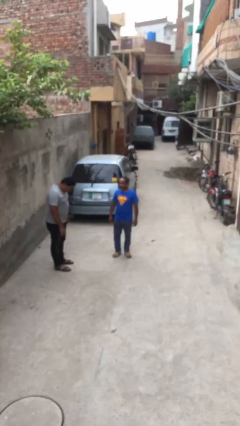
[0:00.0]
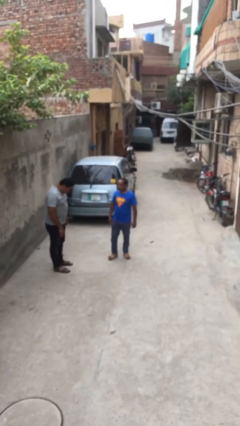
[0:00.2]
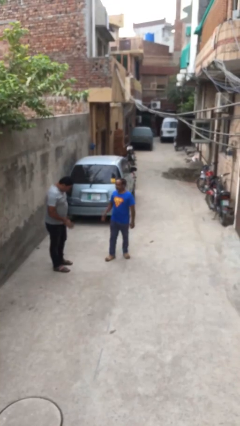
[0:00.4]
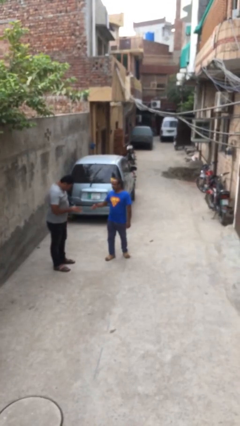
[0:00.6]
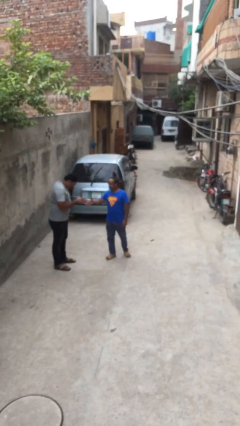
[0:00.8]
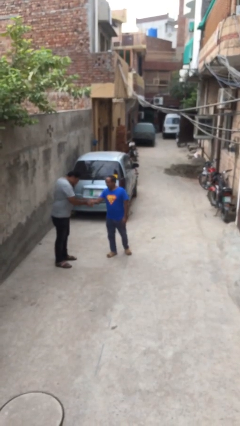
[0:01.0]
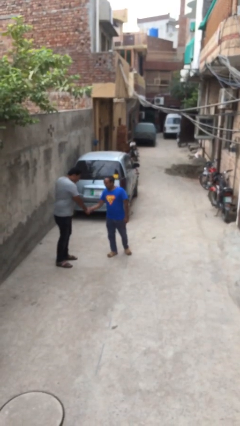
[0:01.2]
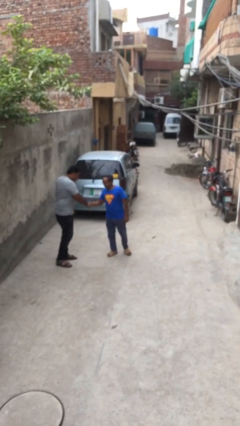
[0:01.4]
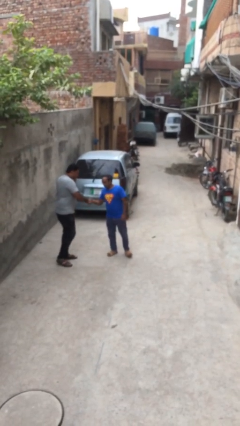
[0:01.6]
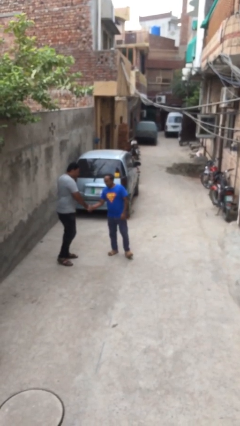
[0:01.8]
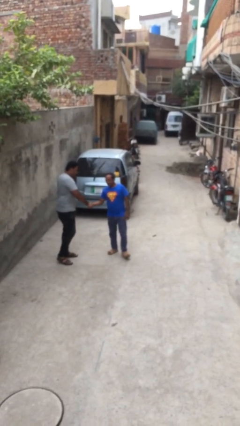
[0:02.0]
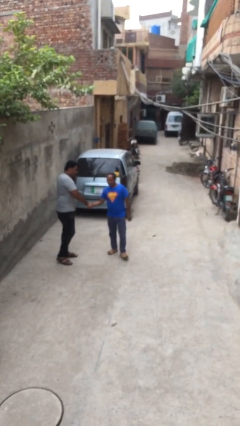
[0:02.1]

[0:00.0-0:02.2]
person shakes hand

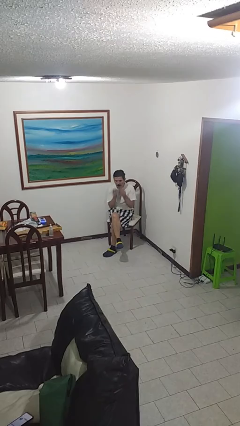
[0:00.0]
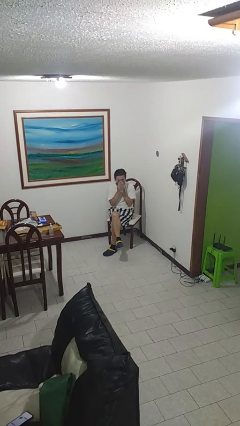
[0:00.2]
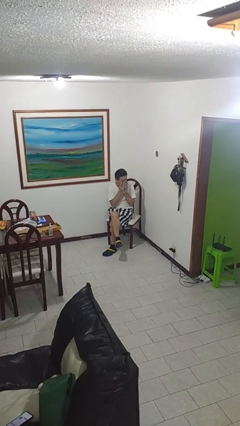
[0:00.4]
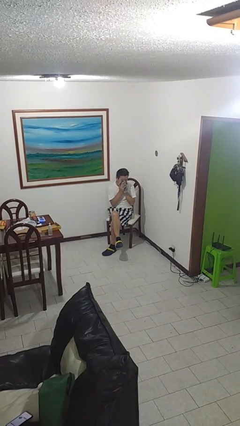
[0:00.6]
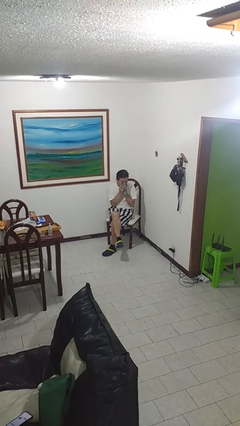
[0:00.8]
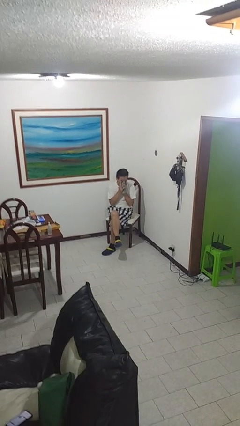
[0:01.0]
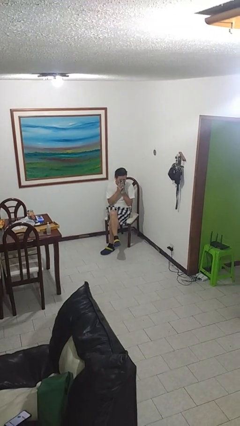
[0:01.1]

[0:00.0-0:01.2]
person blows nose

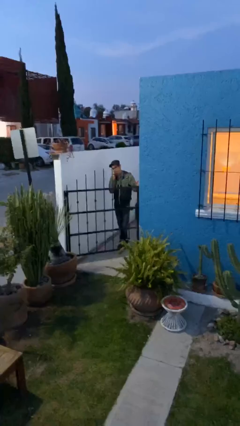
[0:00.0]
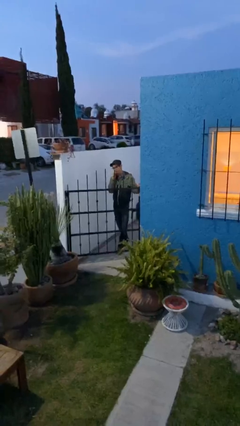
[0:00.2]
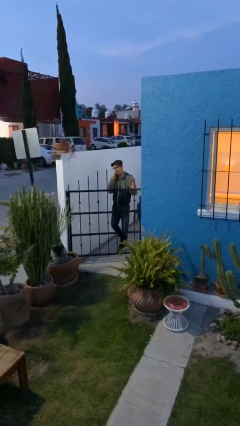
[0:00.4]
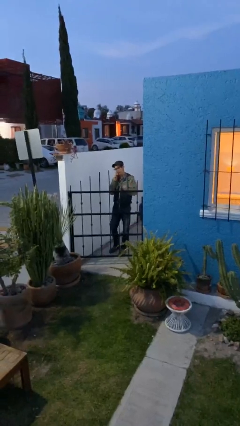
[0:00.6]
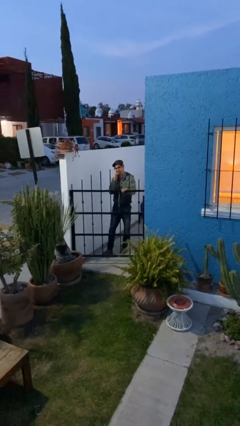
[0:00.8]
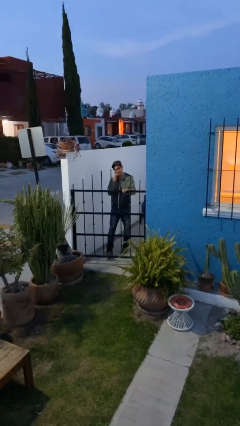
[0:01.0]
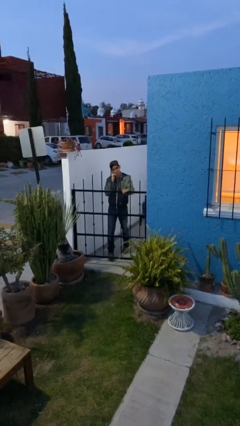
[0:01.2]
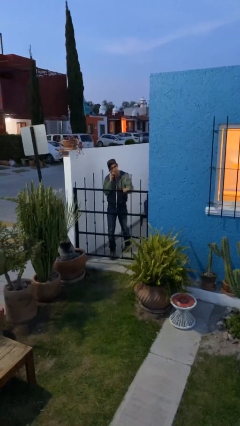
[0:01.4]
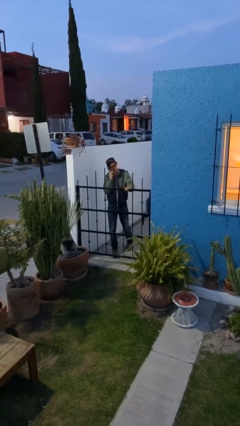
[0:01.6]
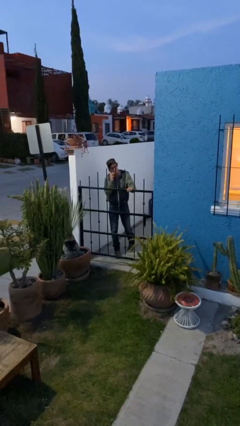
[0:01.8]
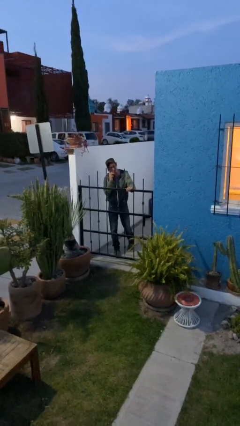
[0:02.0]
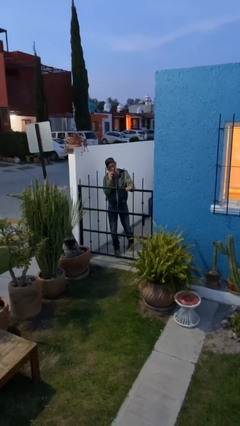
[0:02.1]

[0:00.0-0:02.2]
person closes facility door

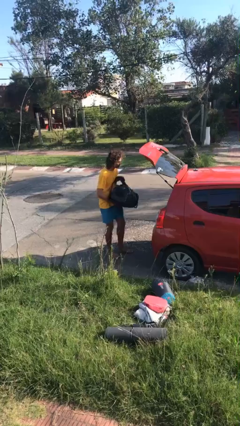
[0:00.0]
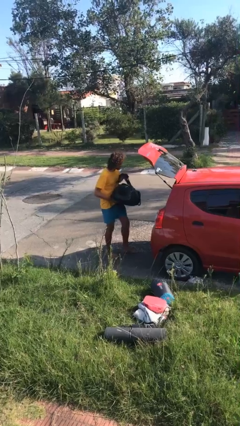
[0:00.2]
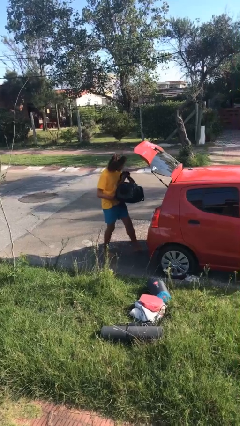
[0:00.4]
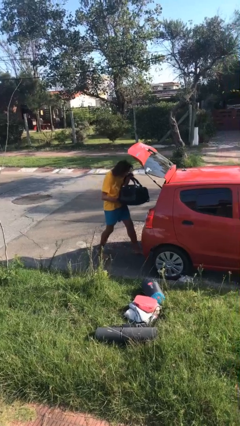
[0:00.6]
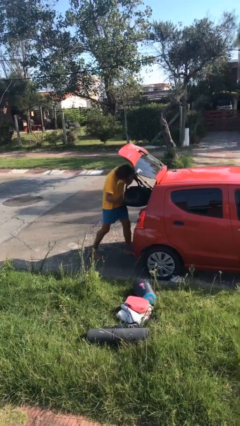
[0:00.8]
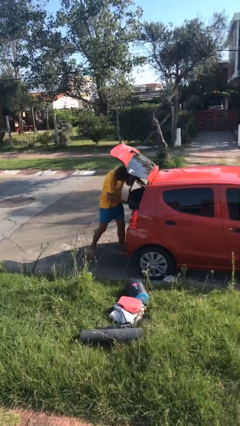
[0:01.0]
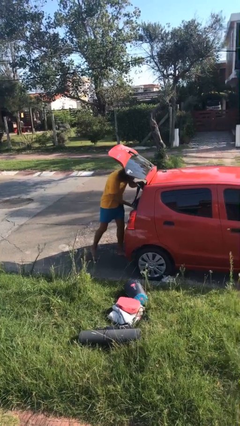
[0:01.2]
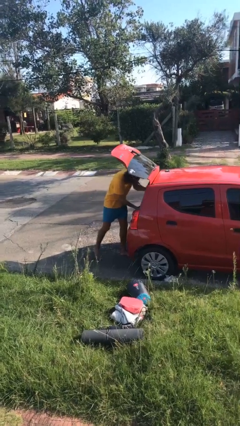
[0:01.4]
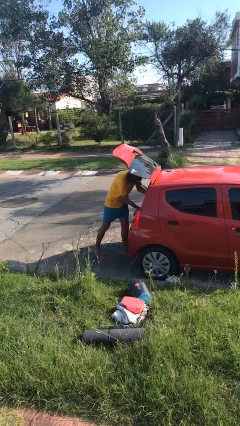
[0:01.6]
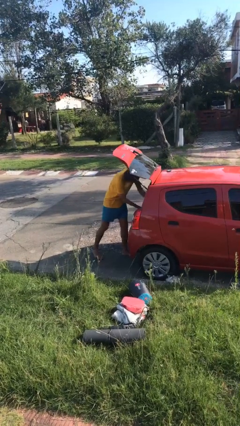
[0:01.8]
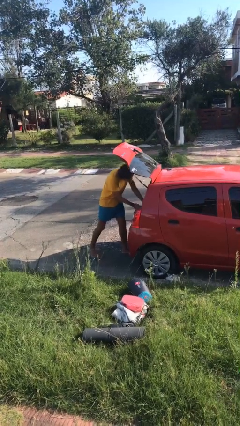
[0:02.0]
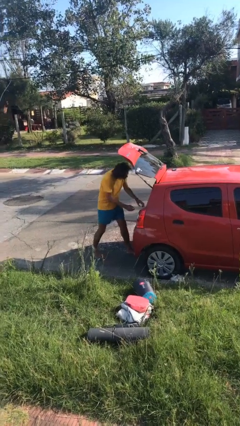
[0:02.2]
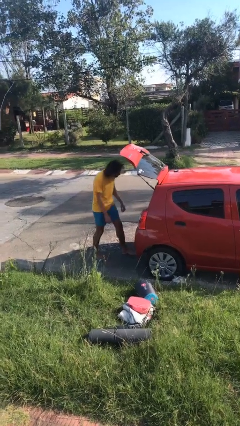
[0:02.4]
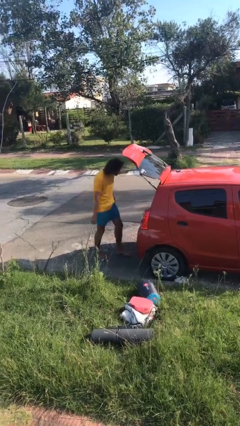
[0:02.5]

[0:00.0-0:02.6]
person loads car

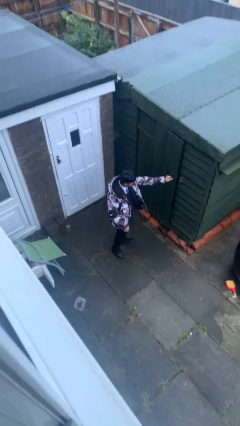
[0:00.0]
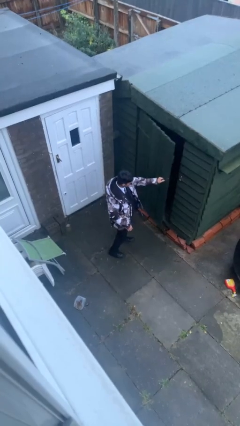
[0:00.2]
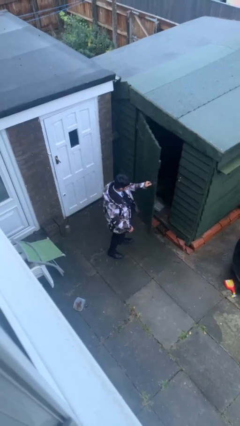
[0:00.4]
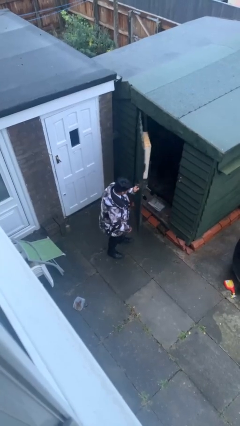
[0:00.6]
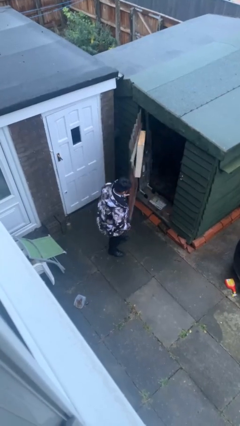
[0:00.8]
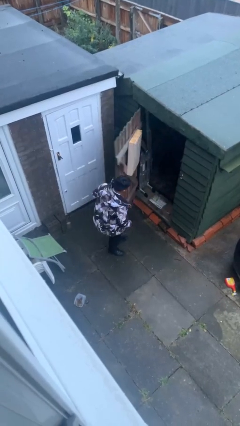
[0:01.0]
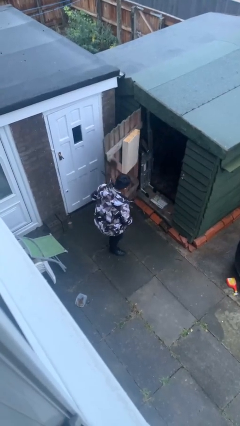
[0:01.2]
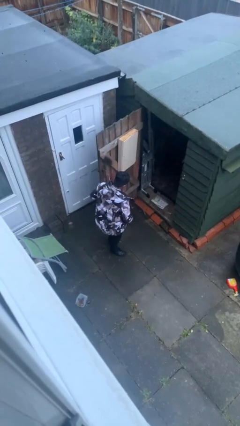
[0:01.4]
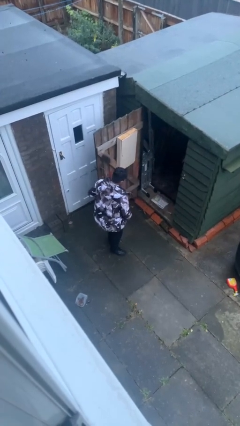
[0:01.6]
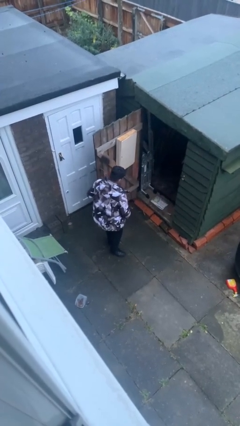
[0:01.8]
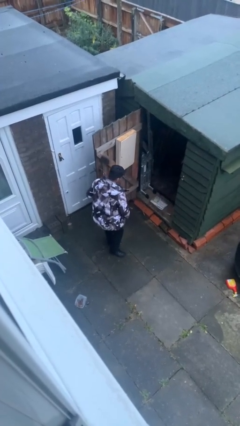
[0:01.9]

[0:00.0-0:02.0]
person opens facility door

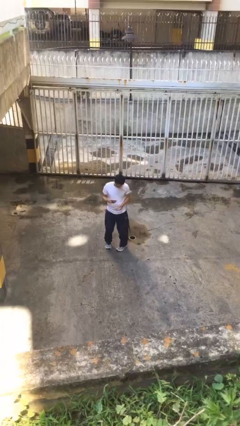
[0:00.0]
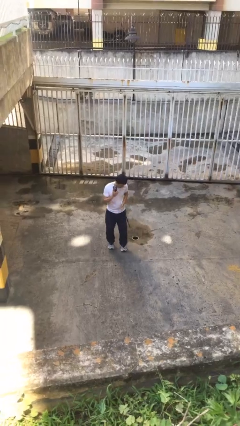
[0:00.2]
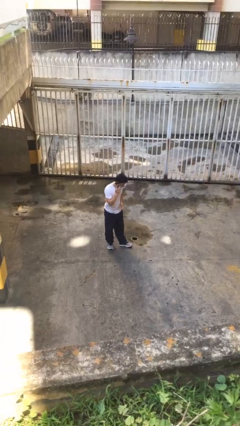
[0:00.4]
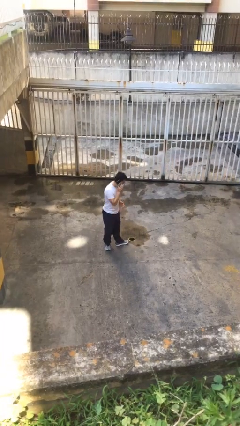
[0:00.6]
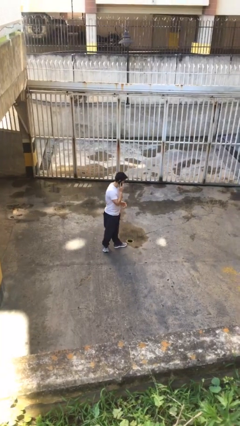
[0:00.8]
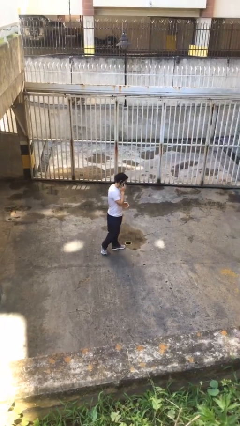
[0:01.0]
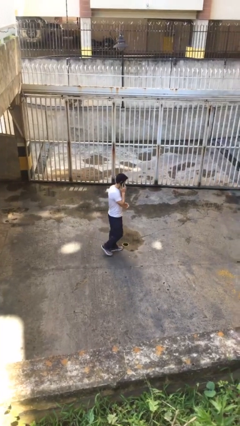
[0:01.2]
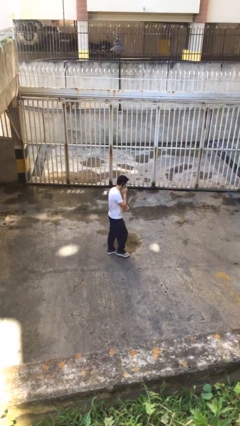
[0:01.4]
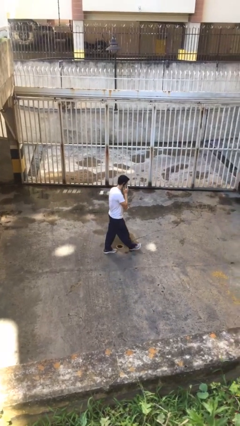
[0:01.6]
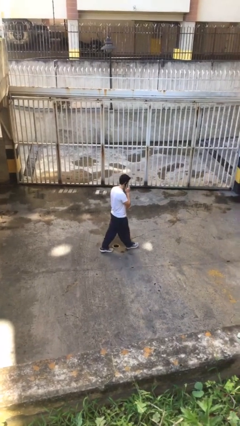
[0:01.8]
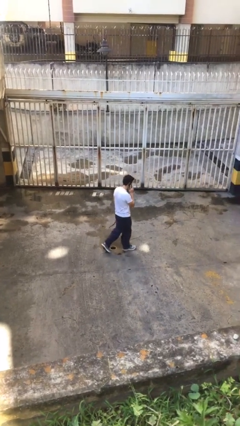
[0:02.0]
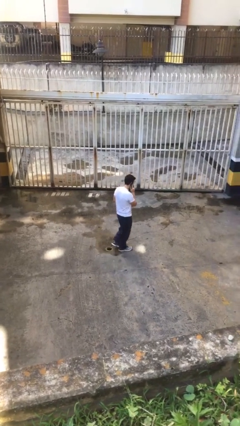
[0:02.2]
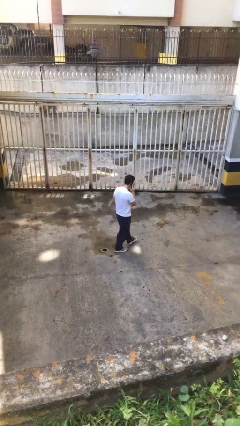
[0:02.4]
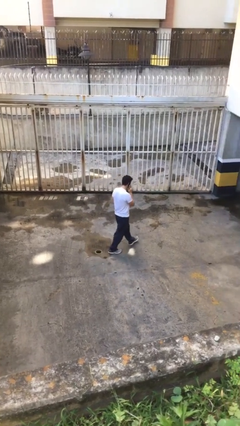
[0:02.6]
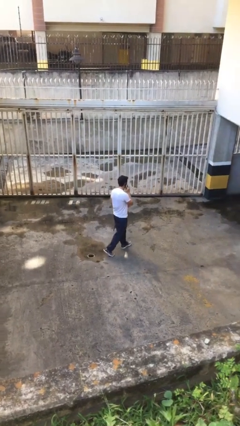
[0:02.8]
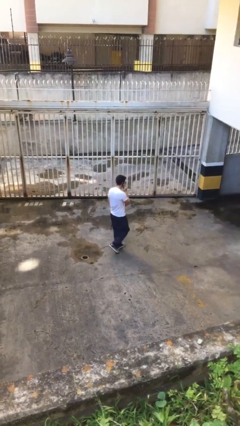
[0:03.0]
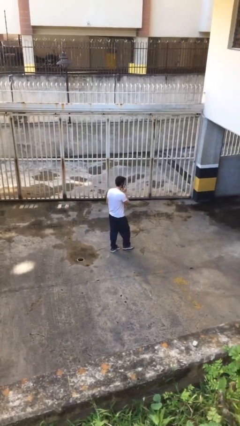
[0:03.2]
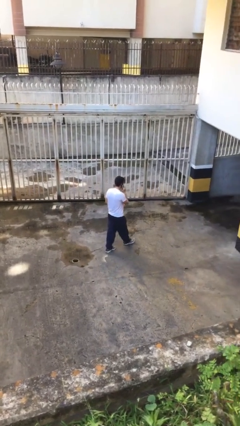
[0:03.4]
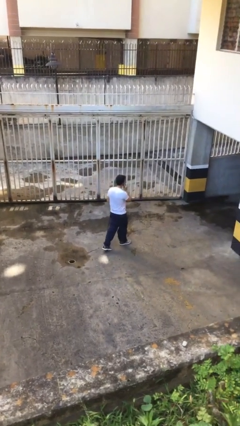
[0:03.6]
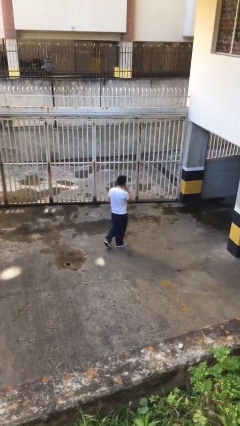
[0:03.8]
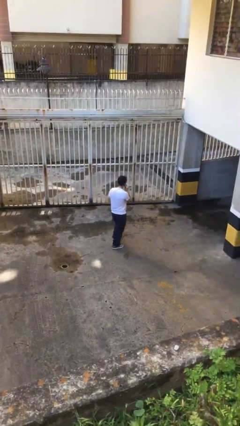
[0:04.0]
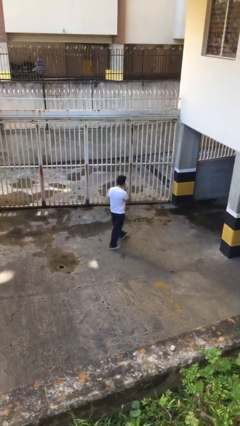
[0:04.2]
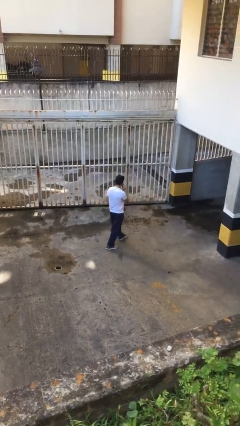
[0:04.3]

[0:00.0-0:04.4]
person talks on phone

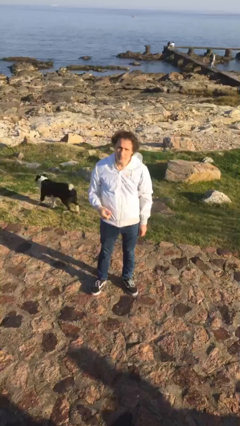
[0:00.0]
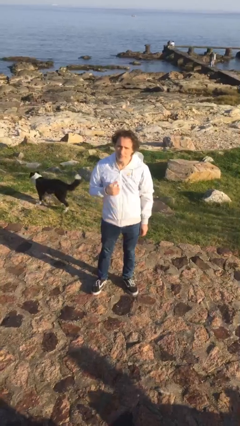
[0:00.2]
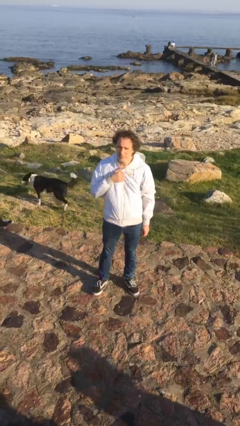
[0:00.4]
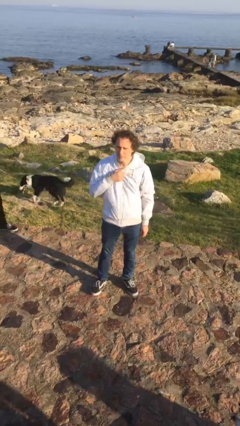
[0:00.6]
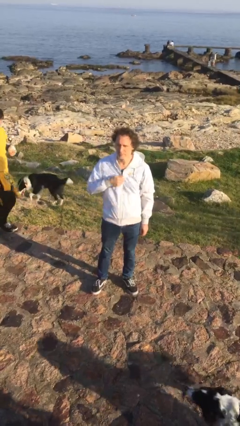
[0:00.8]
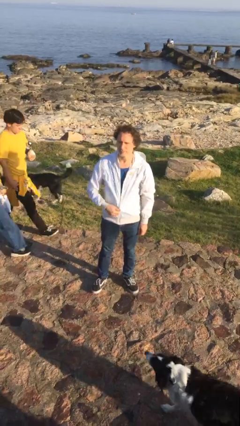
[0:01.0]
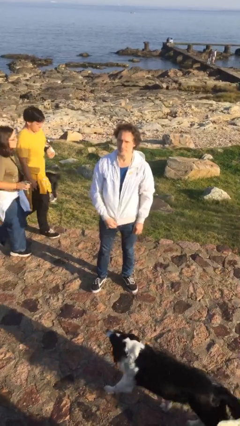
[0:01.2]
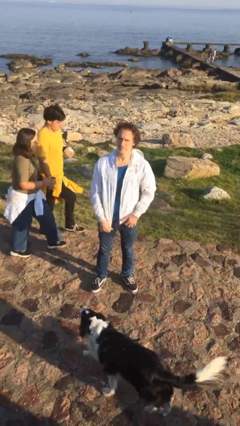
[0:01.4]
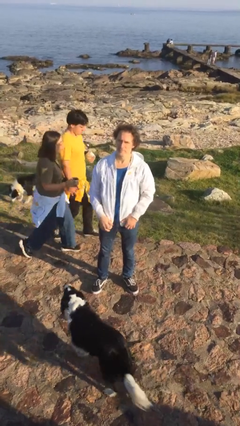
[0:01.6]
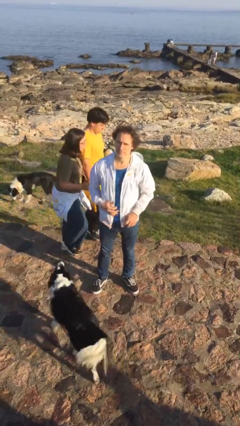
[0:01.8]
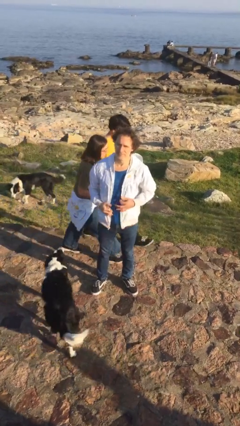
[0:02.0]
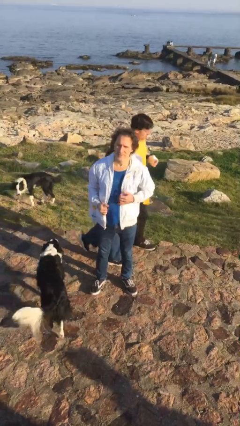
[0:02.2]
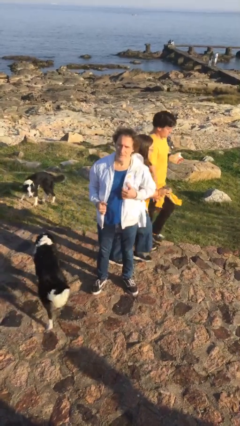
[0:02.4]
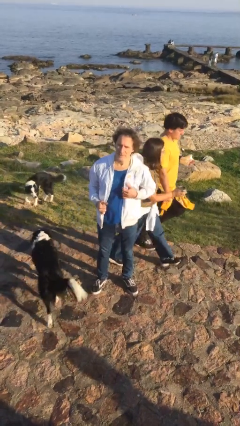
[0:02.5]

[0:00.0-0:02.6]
person unzips jacket

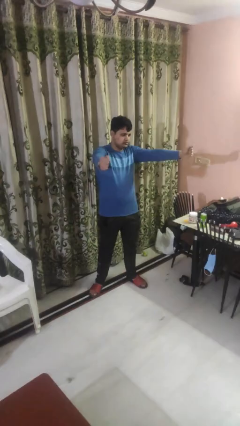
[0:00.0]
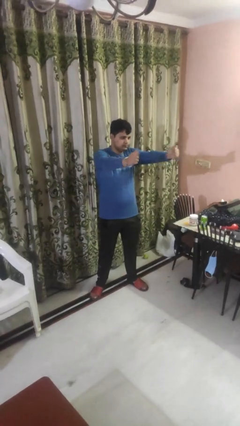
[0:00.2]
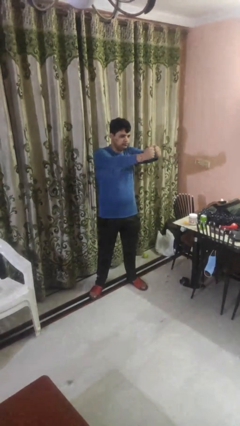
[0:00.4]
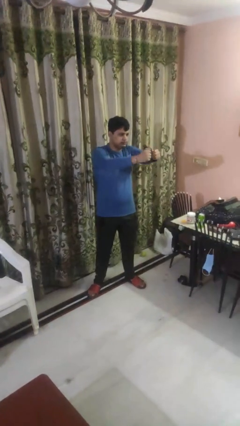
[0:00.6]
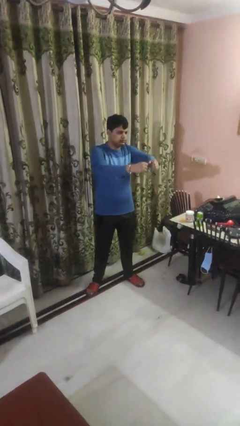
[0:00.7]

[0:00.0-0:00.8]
person gestures zoom out
